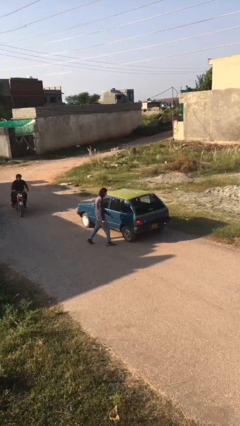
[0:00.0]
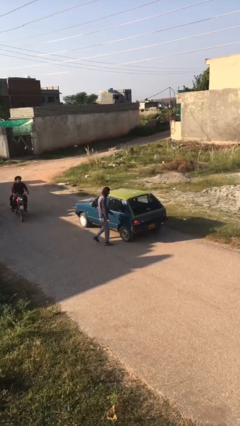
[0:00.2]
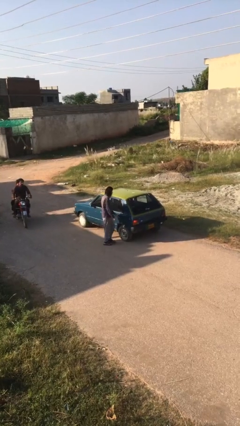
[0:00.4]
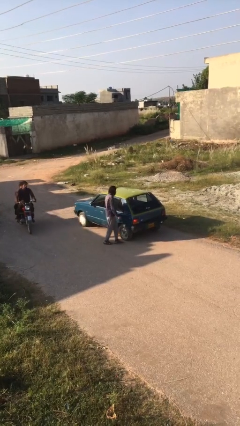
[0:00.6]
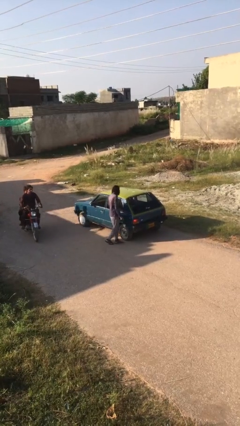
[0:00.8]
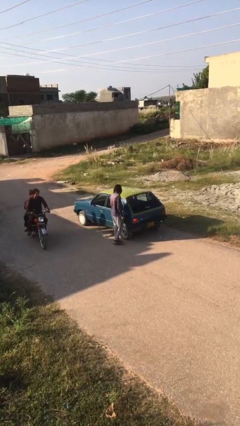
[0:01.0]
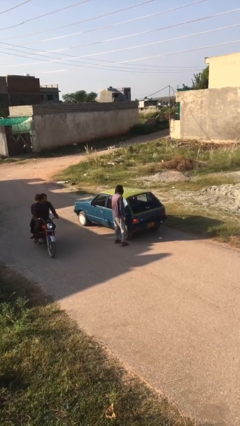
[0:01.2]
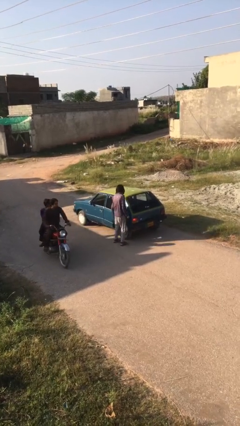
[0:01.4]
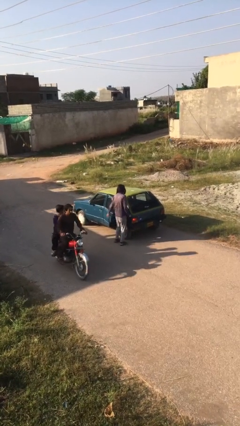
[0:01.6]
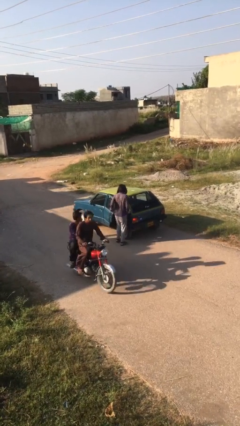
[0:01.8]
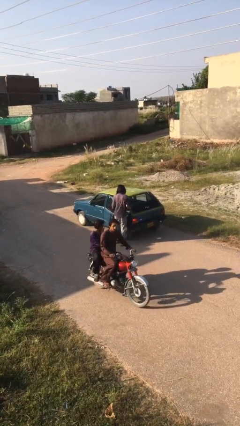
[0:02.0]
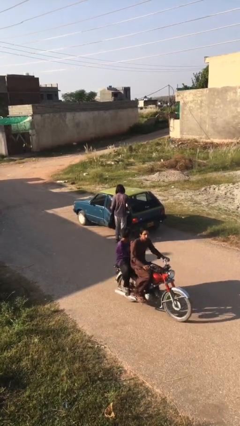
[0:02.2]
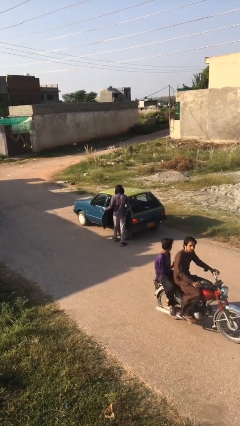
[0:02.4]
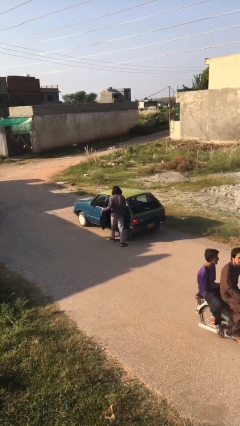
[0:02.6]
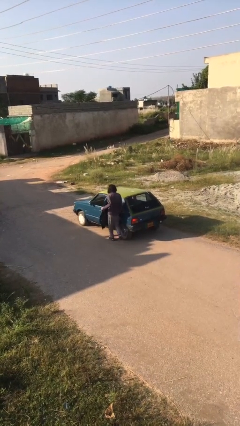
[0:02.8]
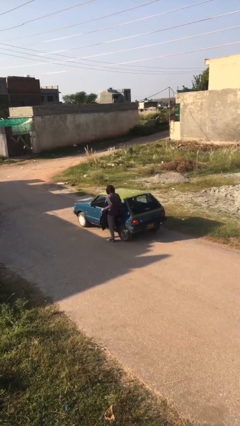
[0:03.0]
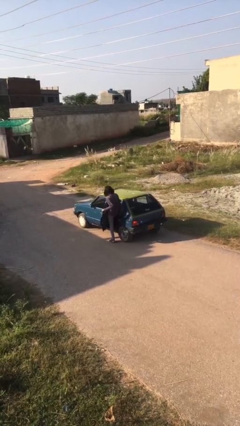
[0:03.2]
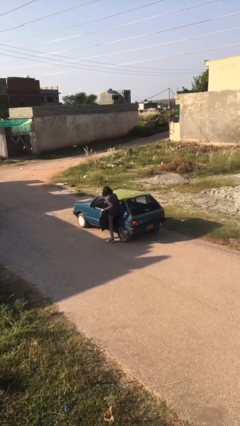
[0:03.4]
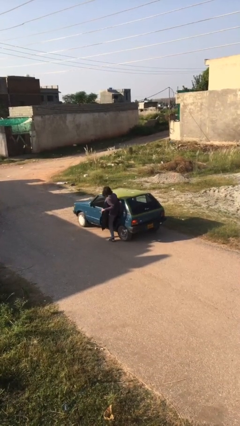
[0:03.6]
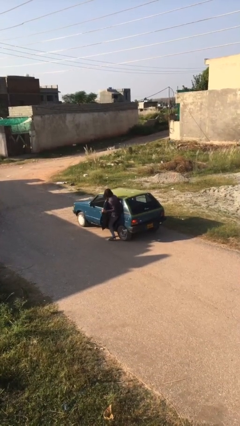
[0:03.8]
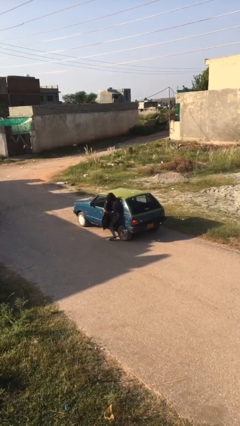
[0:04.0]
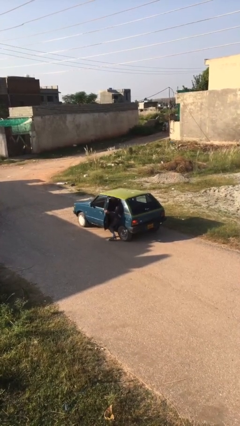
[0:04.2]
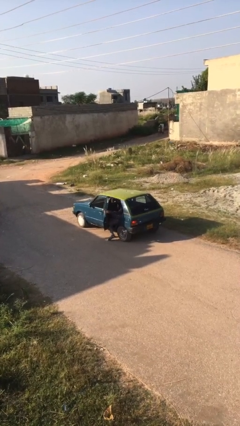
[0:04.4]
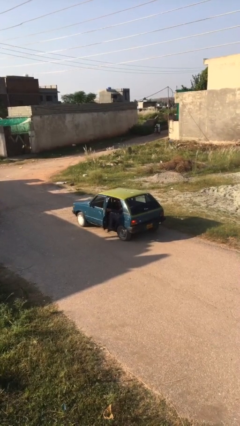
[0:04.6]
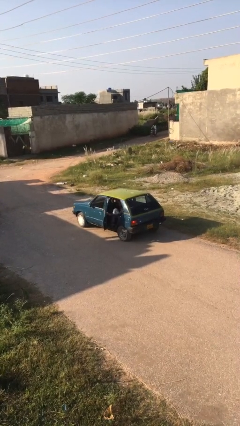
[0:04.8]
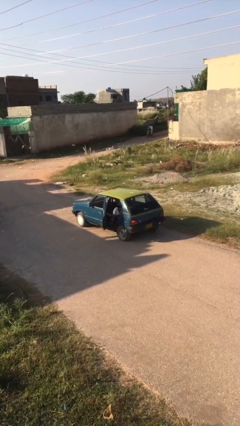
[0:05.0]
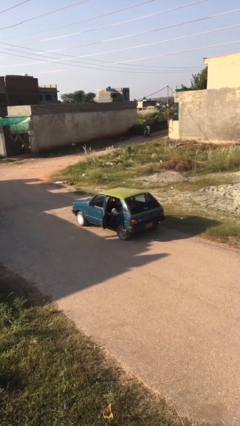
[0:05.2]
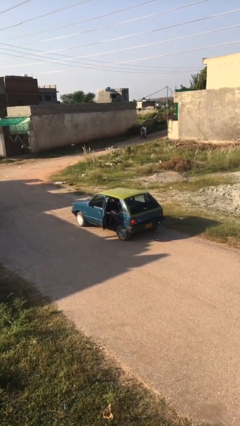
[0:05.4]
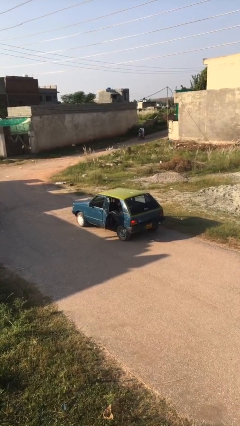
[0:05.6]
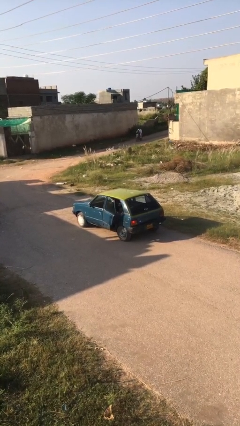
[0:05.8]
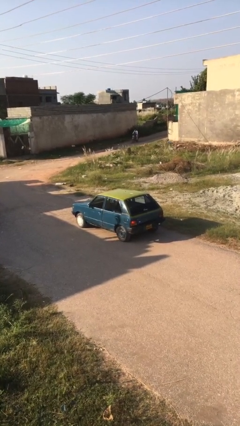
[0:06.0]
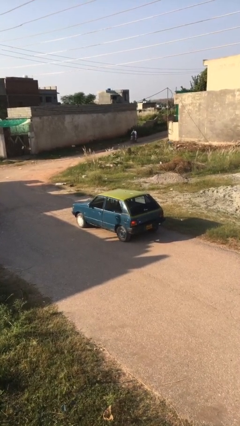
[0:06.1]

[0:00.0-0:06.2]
car picks up person

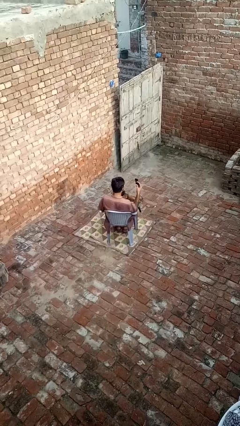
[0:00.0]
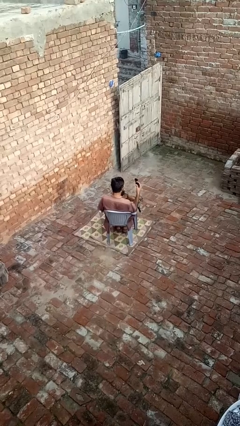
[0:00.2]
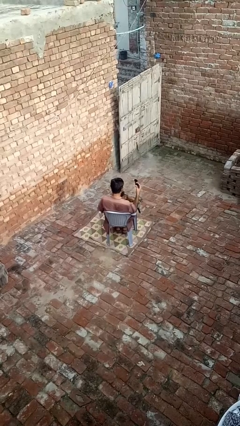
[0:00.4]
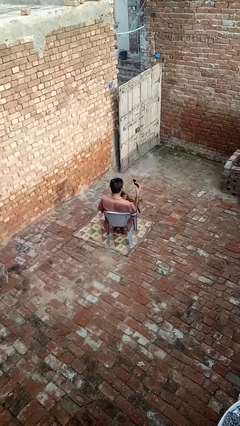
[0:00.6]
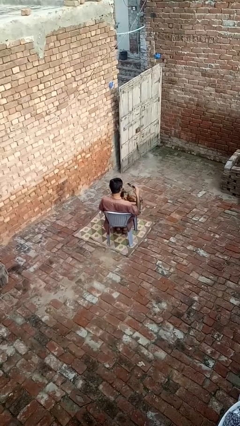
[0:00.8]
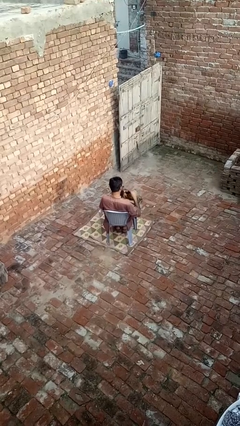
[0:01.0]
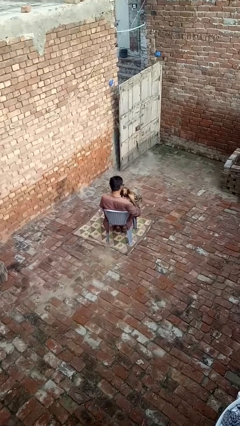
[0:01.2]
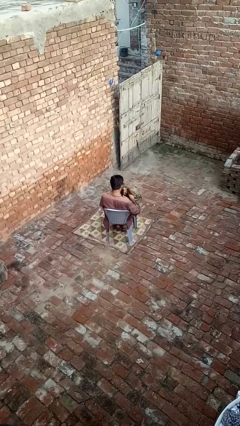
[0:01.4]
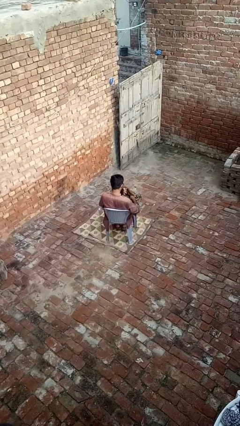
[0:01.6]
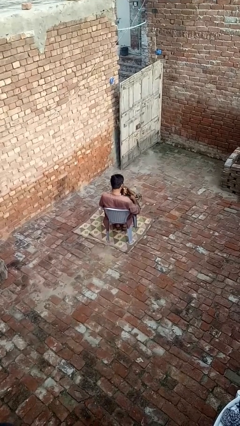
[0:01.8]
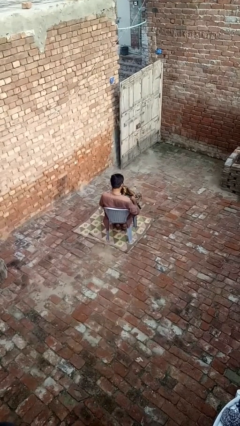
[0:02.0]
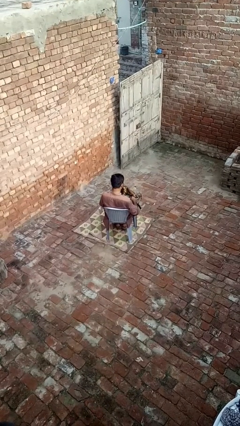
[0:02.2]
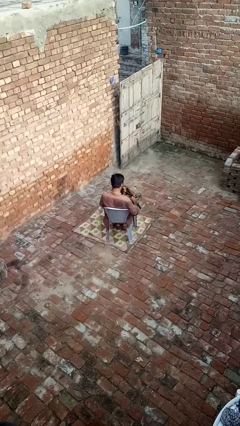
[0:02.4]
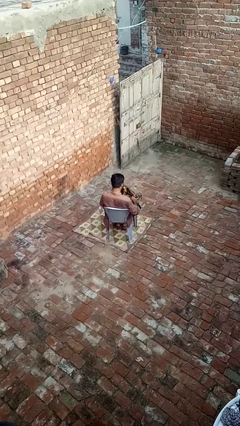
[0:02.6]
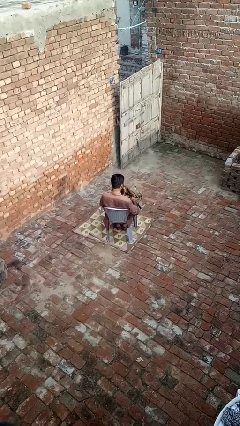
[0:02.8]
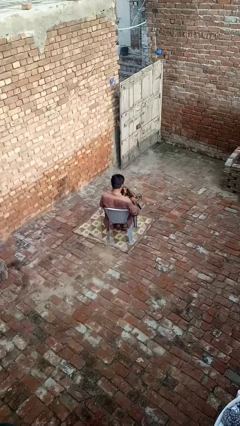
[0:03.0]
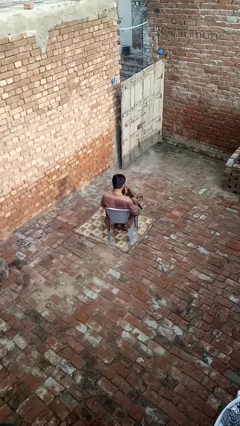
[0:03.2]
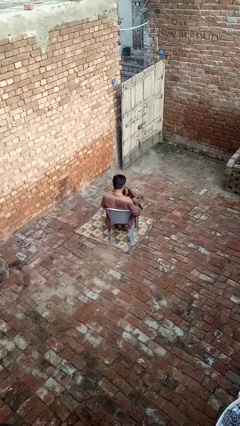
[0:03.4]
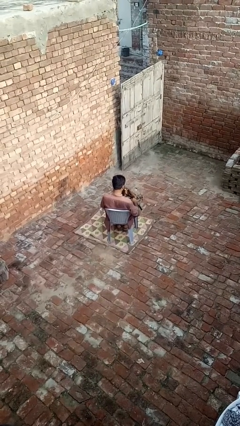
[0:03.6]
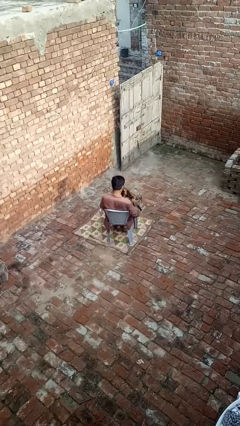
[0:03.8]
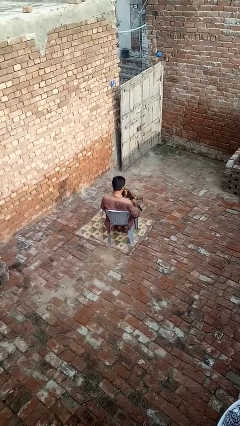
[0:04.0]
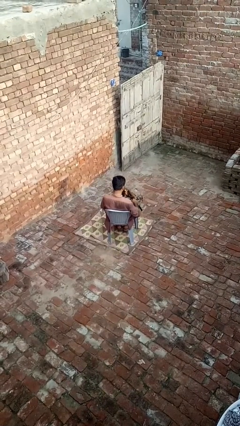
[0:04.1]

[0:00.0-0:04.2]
person puts object into purse

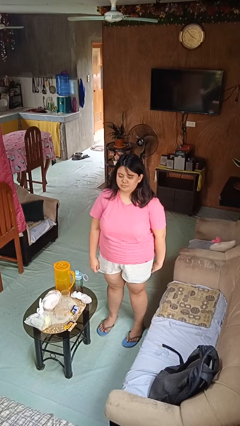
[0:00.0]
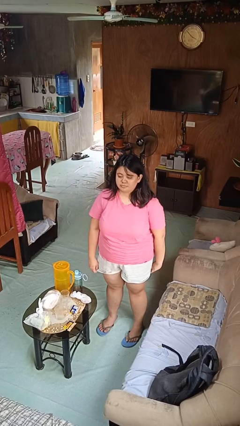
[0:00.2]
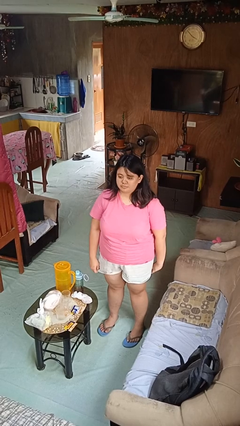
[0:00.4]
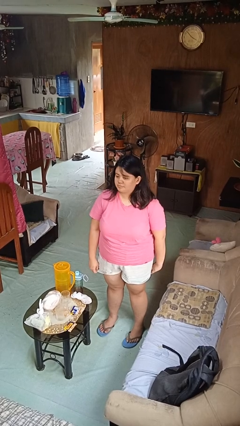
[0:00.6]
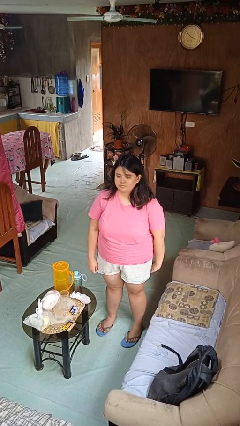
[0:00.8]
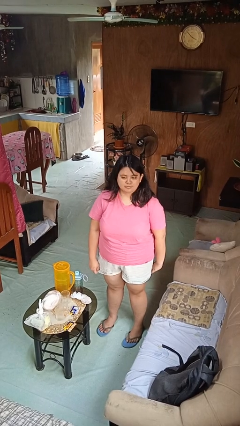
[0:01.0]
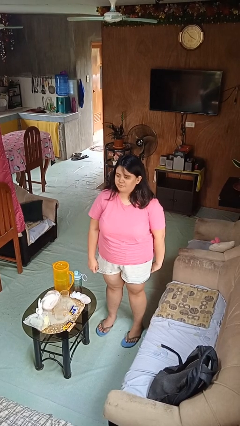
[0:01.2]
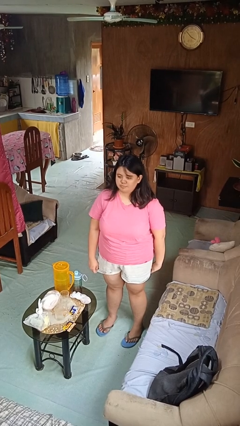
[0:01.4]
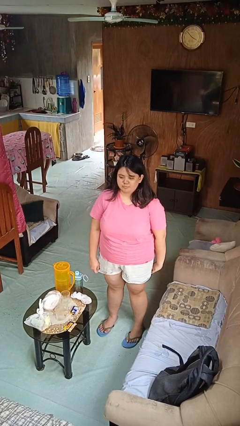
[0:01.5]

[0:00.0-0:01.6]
person shakes head

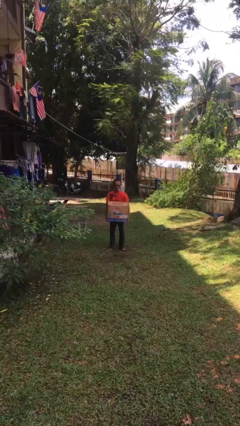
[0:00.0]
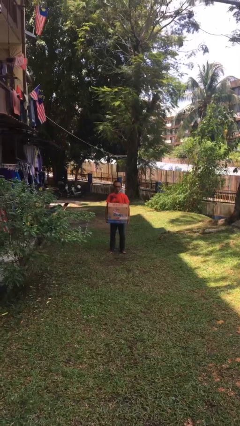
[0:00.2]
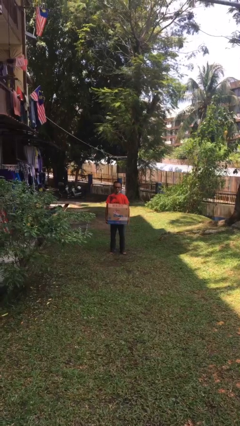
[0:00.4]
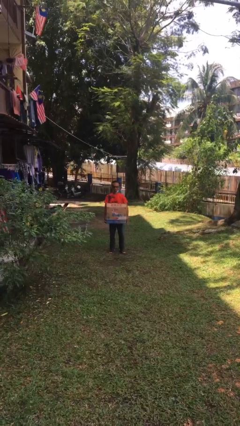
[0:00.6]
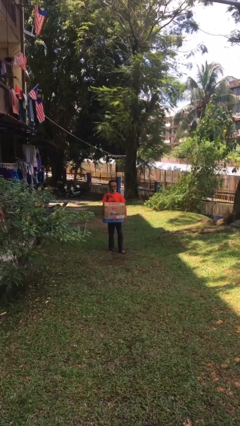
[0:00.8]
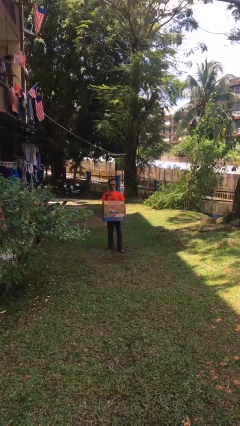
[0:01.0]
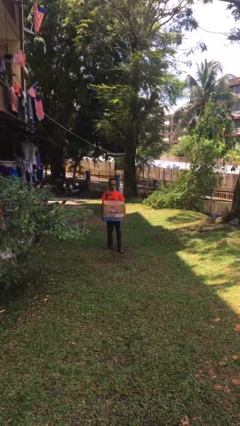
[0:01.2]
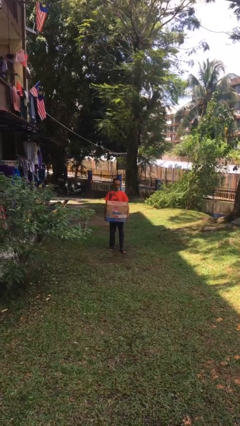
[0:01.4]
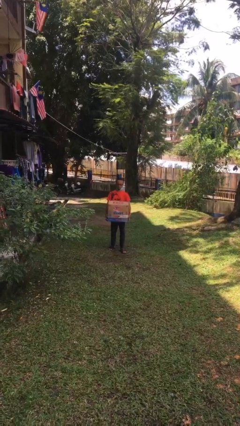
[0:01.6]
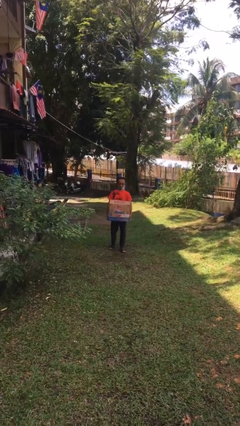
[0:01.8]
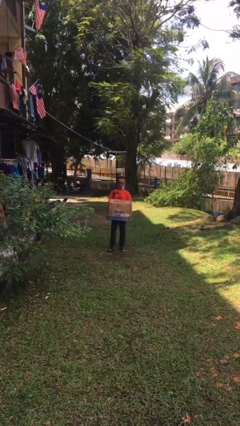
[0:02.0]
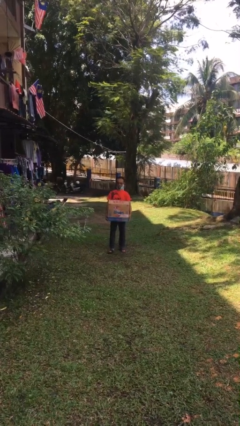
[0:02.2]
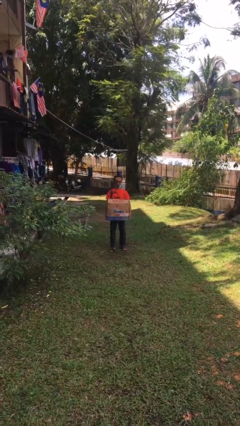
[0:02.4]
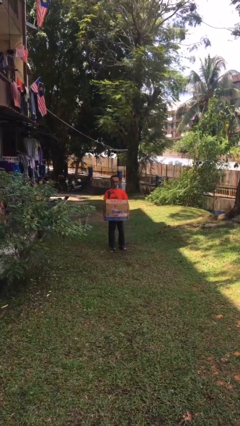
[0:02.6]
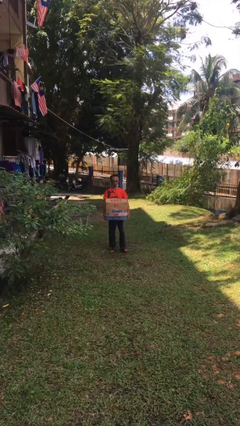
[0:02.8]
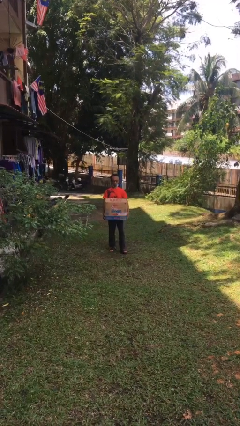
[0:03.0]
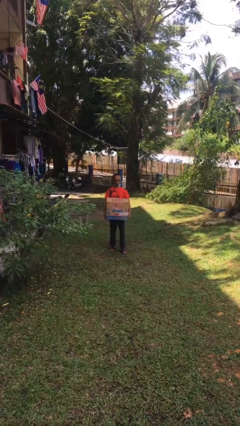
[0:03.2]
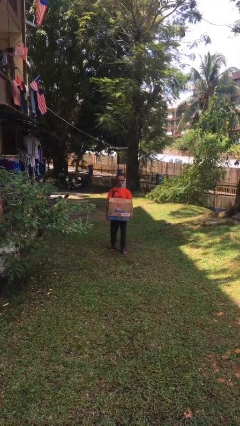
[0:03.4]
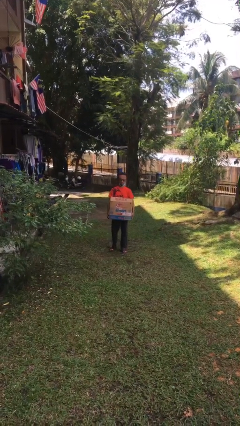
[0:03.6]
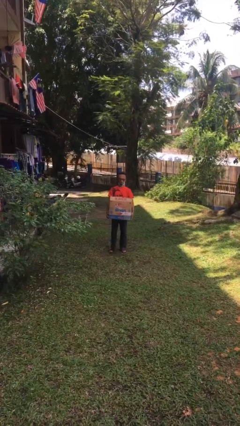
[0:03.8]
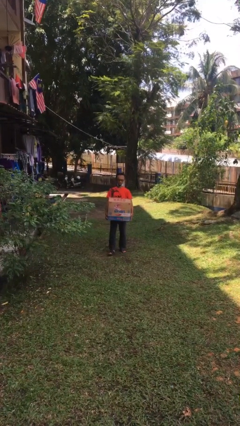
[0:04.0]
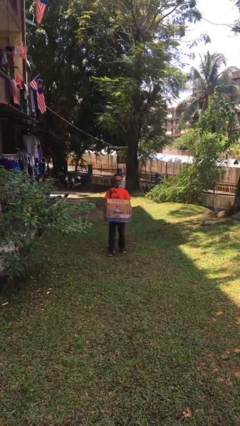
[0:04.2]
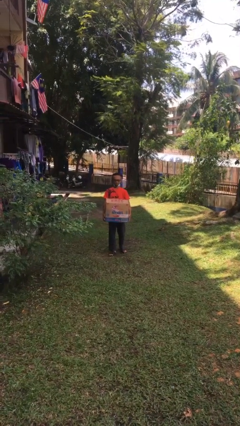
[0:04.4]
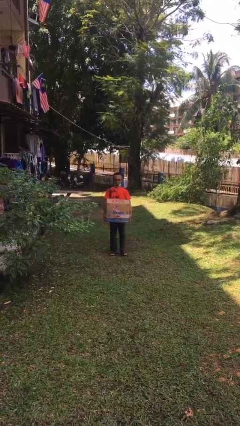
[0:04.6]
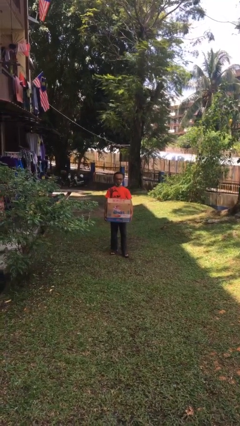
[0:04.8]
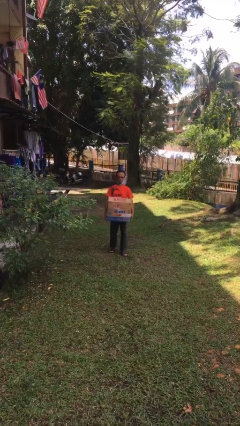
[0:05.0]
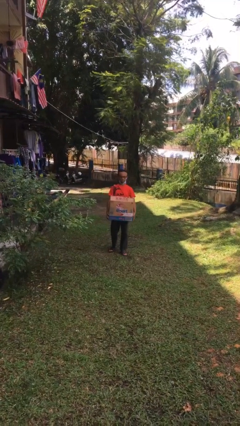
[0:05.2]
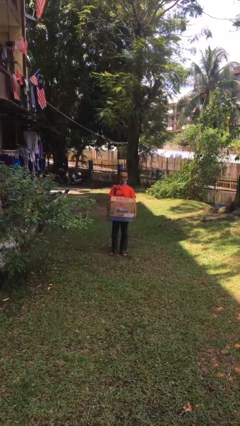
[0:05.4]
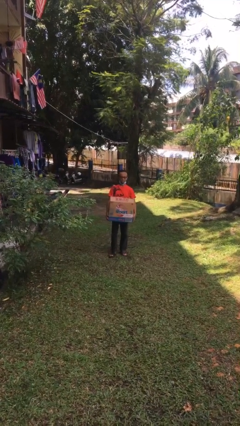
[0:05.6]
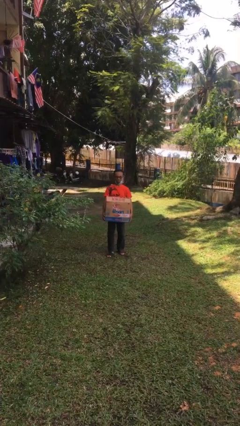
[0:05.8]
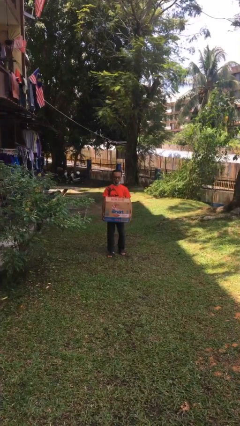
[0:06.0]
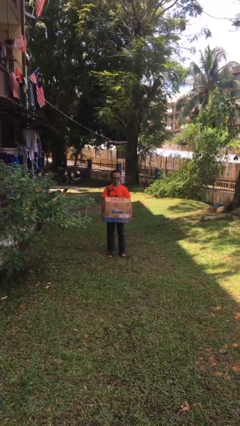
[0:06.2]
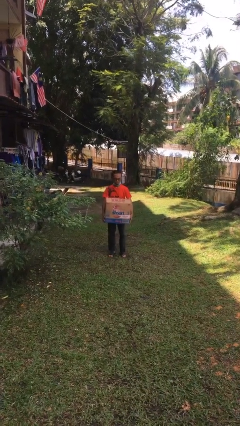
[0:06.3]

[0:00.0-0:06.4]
person carries heavy object
